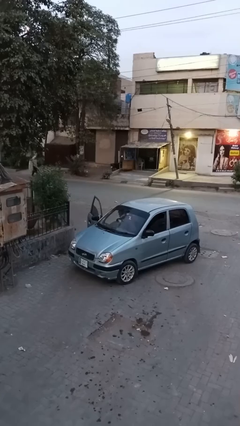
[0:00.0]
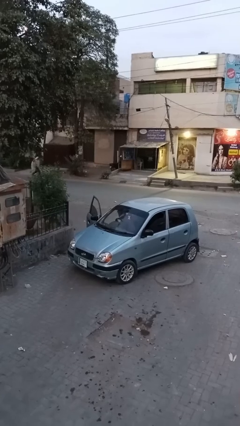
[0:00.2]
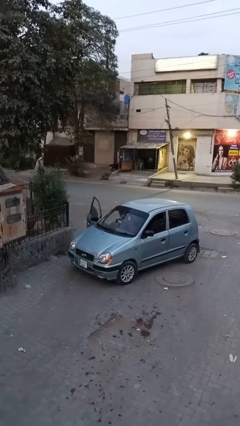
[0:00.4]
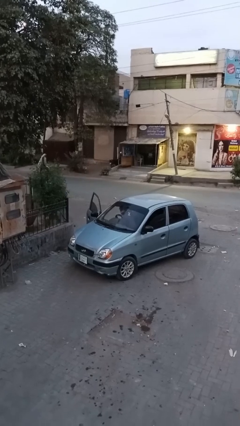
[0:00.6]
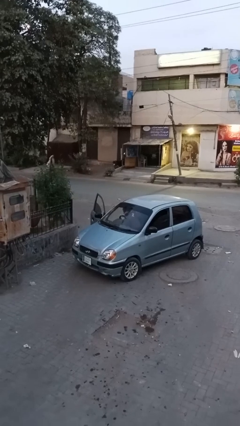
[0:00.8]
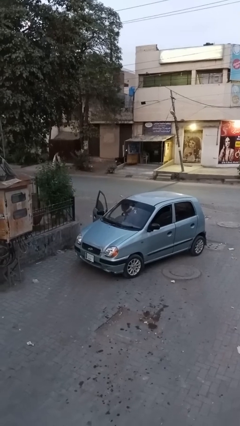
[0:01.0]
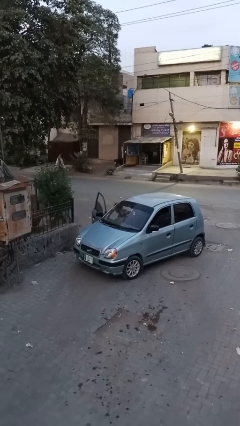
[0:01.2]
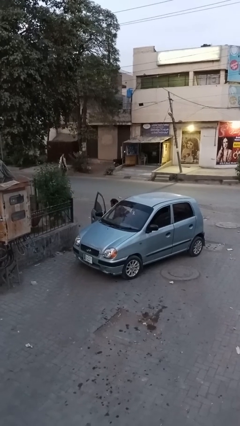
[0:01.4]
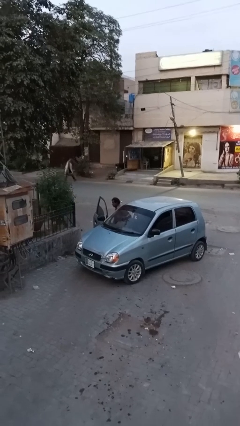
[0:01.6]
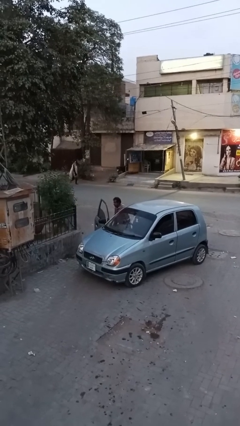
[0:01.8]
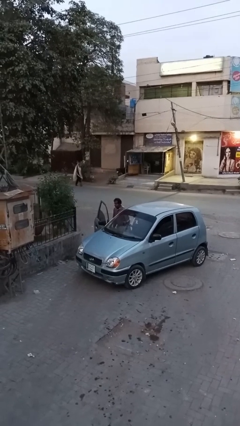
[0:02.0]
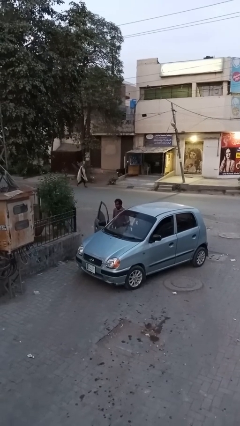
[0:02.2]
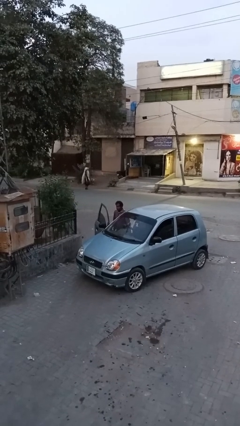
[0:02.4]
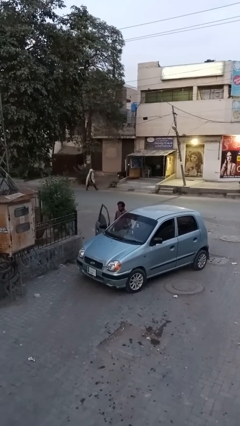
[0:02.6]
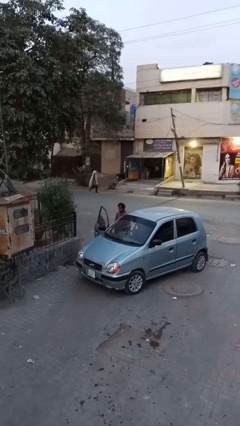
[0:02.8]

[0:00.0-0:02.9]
person exits car

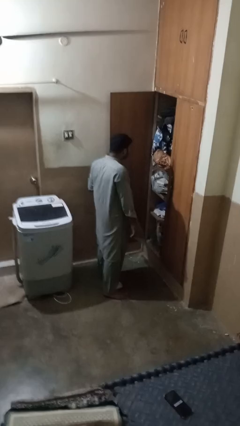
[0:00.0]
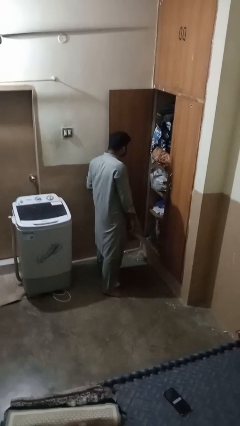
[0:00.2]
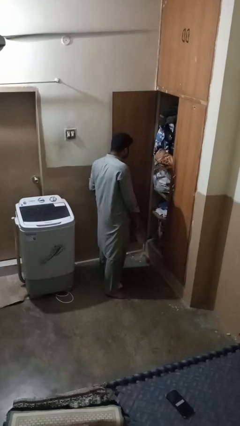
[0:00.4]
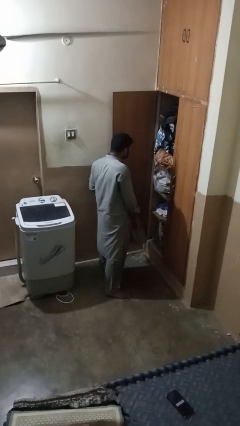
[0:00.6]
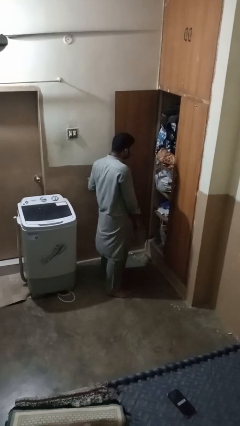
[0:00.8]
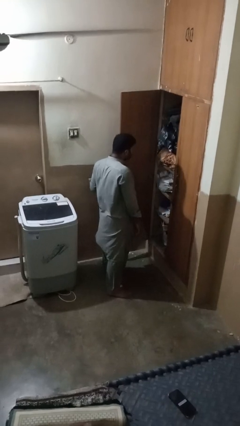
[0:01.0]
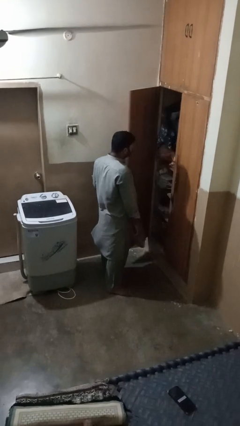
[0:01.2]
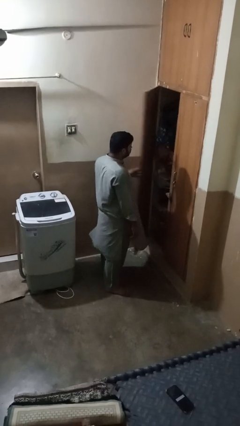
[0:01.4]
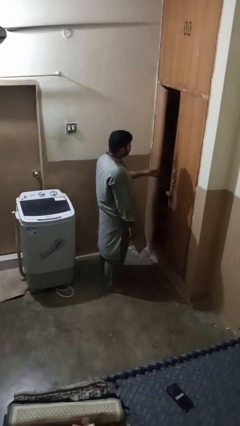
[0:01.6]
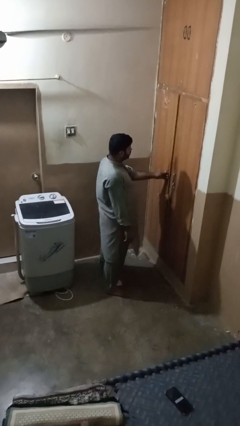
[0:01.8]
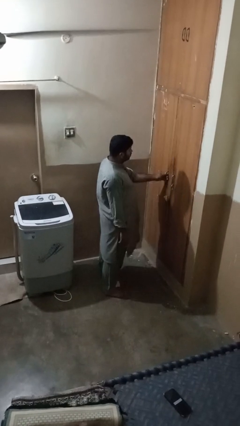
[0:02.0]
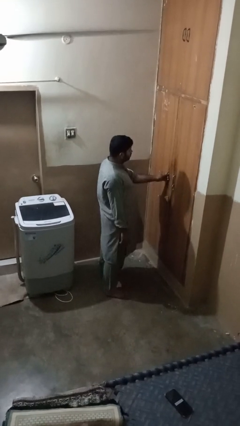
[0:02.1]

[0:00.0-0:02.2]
person closes closet door

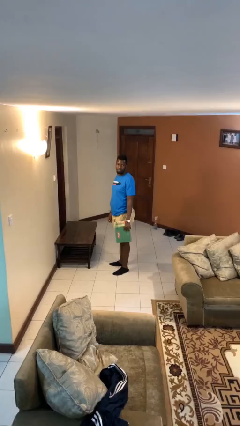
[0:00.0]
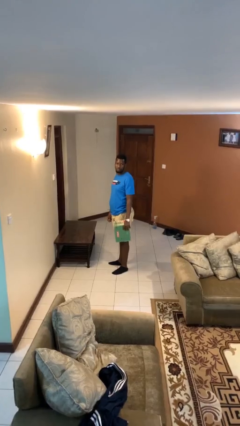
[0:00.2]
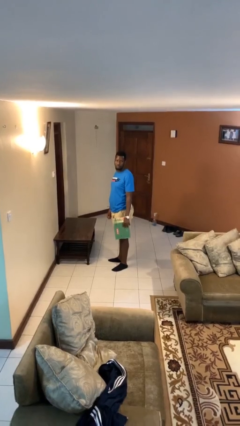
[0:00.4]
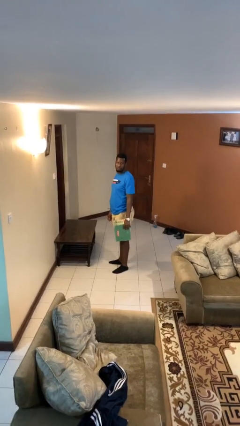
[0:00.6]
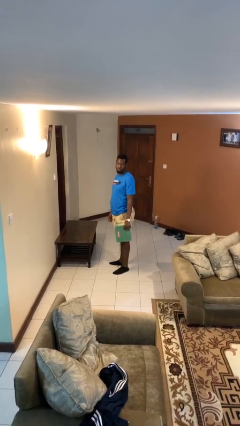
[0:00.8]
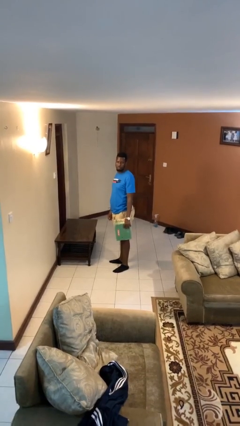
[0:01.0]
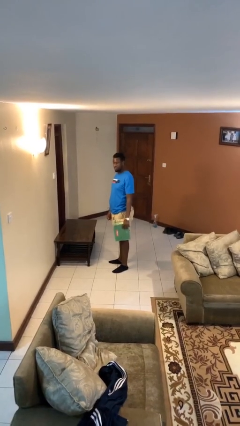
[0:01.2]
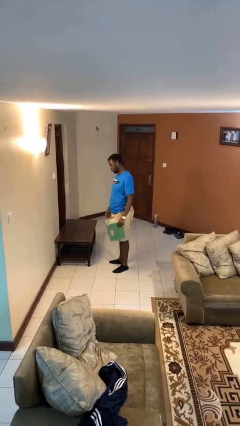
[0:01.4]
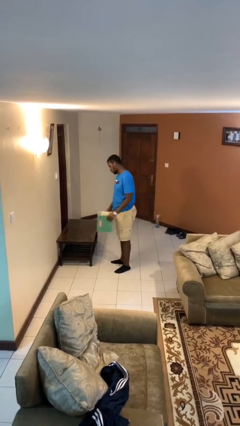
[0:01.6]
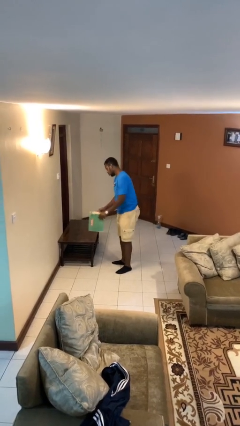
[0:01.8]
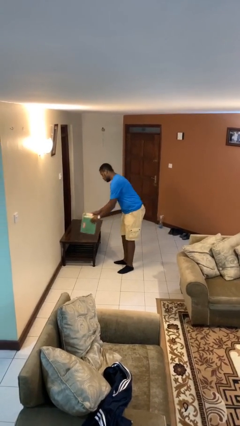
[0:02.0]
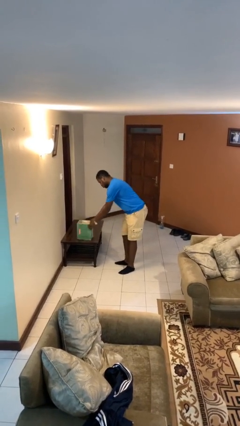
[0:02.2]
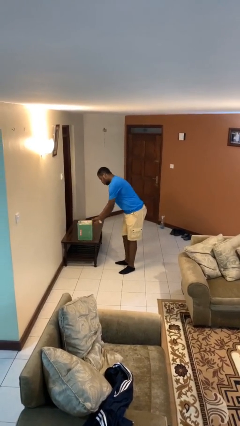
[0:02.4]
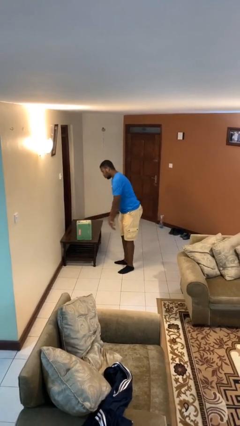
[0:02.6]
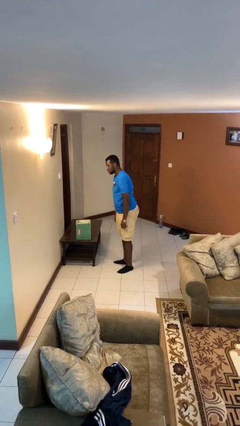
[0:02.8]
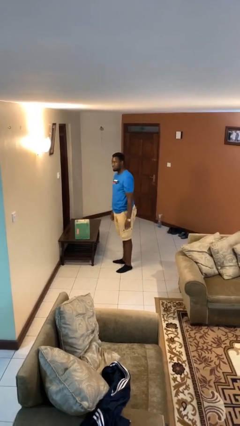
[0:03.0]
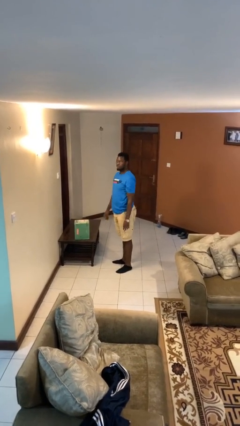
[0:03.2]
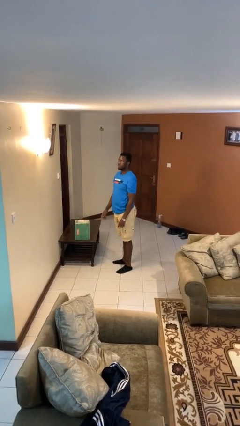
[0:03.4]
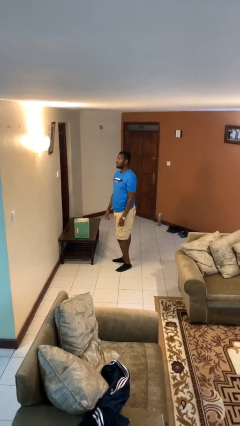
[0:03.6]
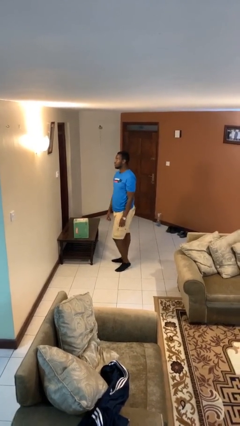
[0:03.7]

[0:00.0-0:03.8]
person puts down object on table

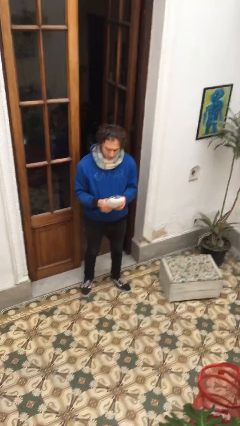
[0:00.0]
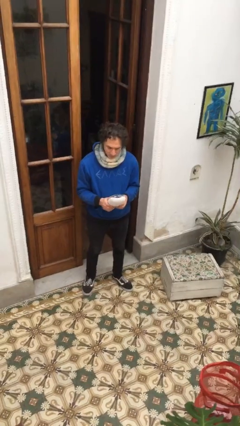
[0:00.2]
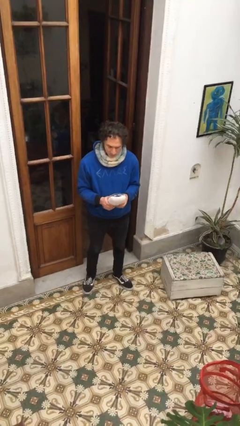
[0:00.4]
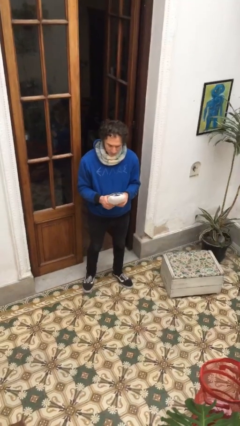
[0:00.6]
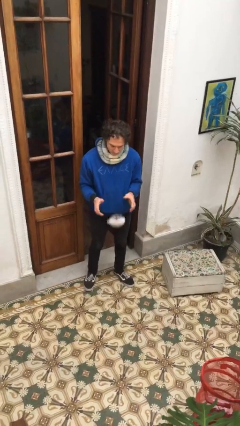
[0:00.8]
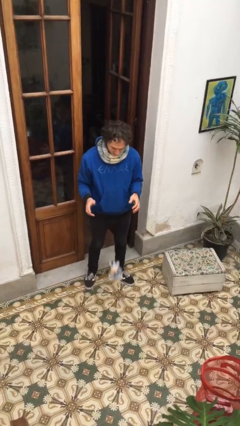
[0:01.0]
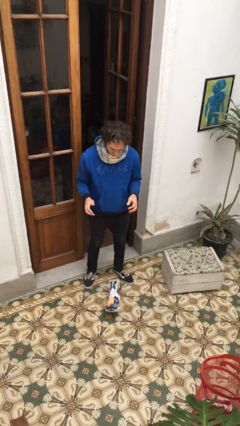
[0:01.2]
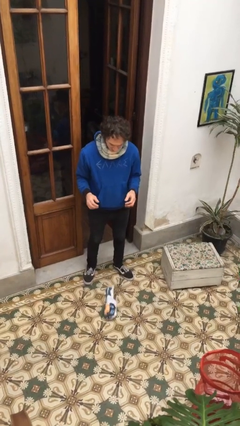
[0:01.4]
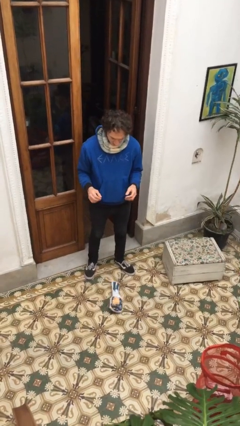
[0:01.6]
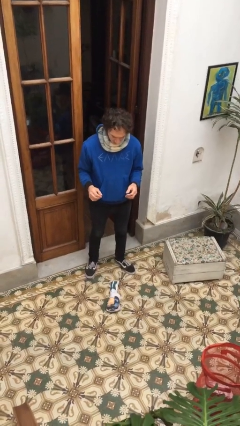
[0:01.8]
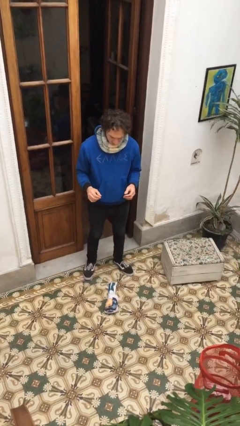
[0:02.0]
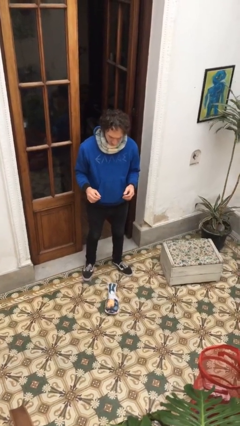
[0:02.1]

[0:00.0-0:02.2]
person drops object

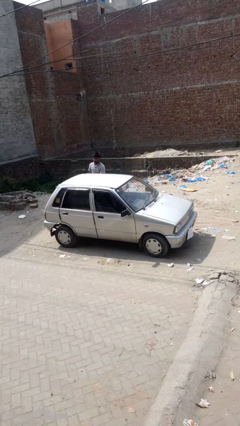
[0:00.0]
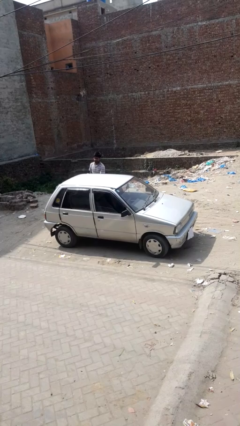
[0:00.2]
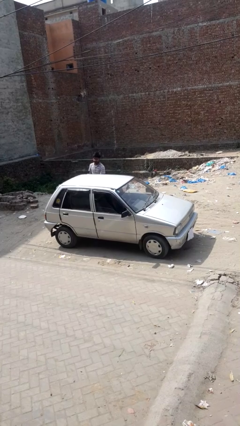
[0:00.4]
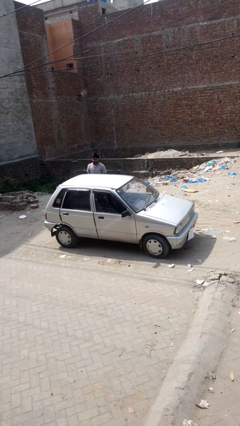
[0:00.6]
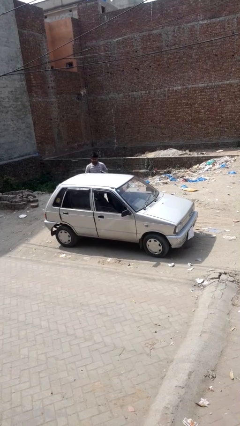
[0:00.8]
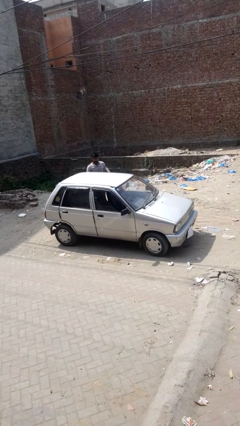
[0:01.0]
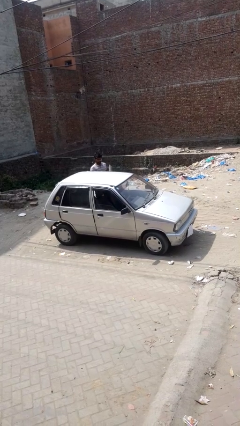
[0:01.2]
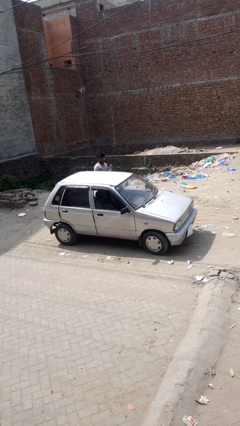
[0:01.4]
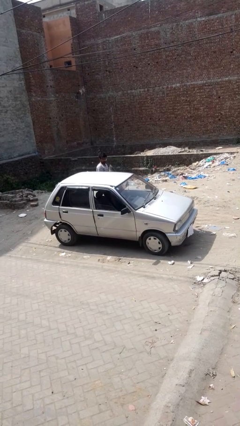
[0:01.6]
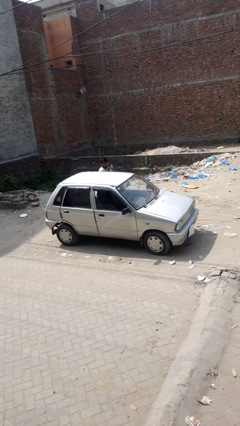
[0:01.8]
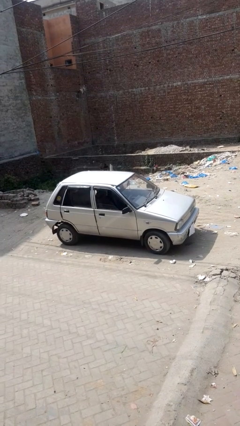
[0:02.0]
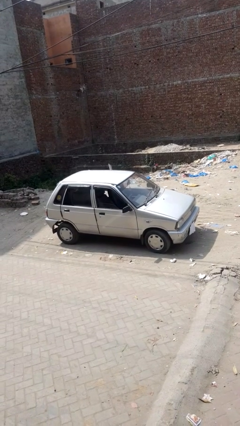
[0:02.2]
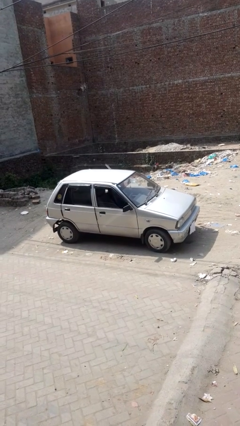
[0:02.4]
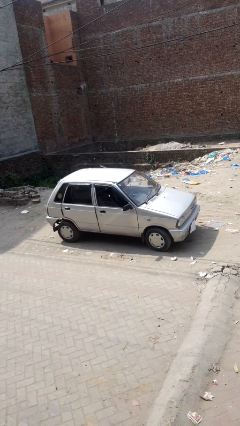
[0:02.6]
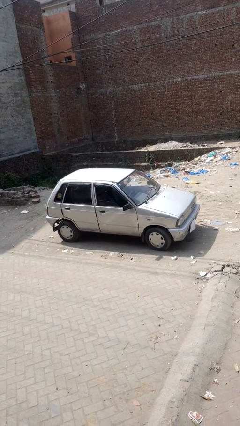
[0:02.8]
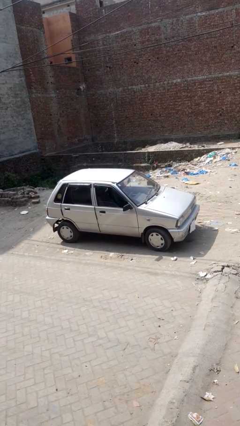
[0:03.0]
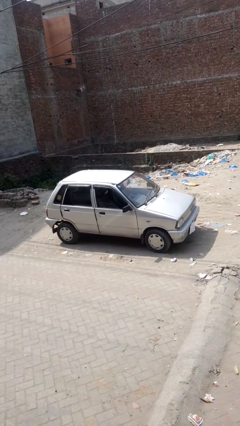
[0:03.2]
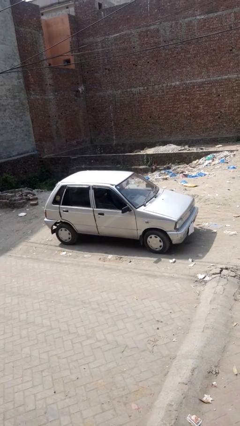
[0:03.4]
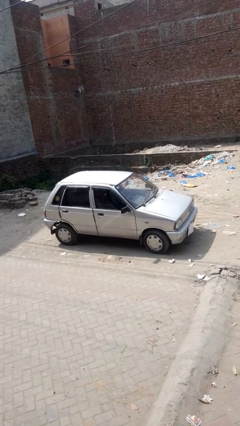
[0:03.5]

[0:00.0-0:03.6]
car picks up person

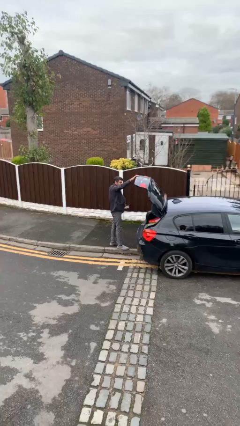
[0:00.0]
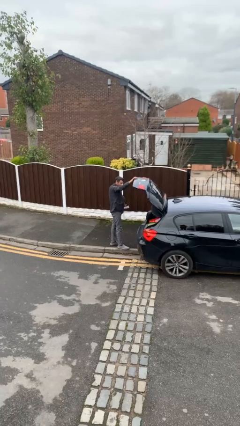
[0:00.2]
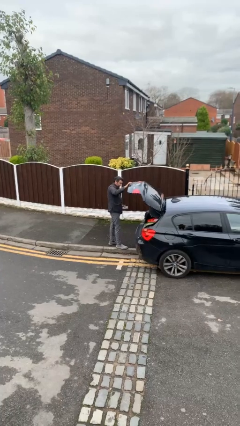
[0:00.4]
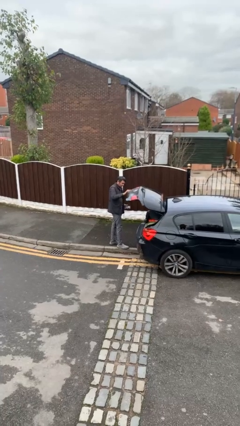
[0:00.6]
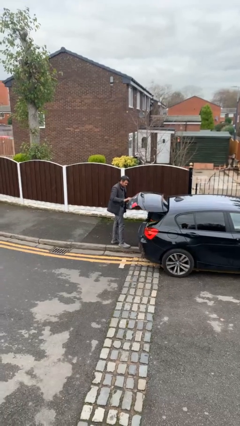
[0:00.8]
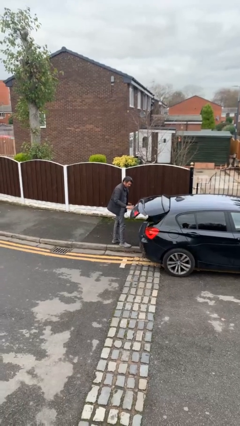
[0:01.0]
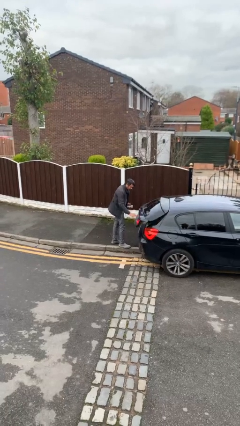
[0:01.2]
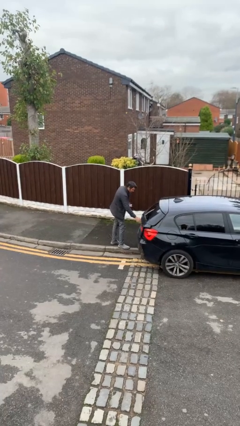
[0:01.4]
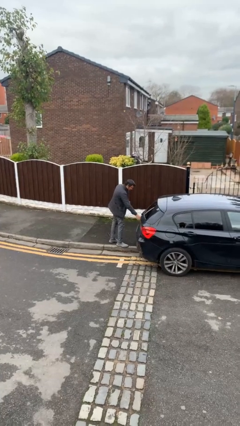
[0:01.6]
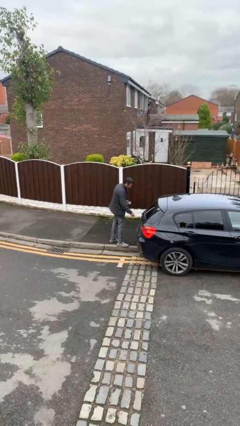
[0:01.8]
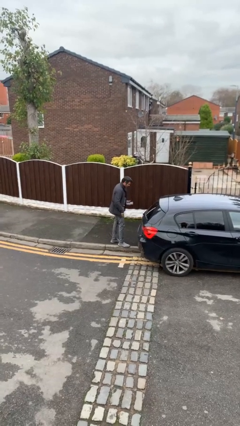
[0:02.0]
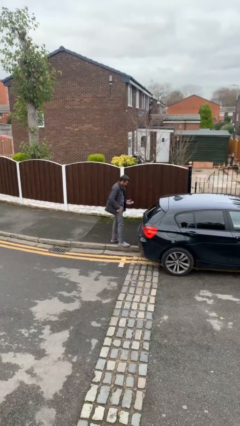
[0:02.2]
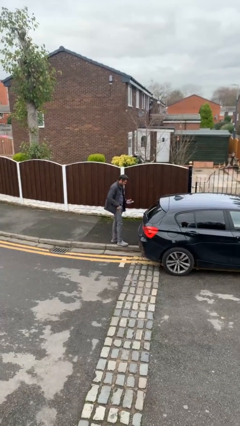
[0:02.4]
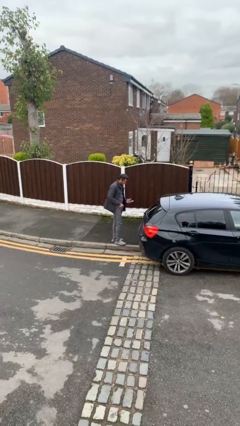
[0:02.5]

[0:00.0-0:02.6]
person closes car trunk
